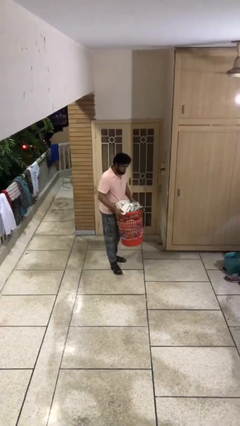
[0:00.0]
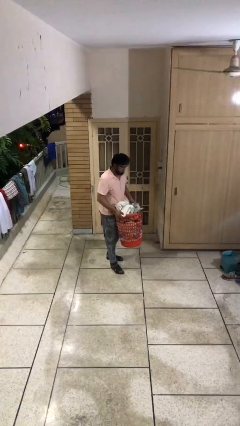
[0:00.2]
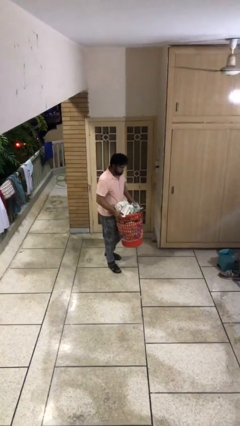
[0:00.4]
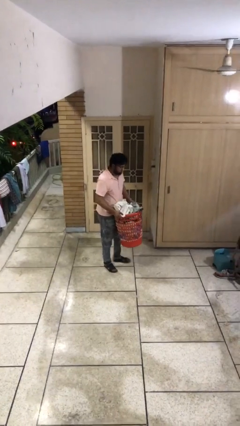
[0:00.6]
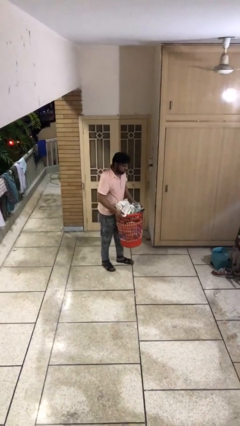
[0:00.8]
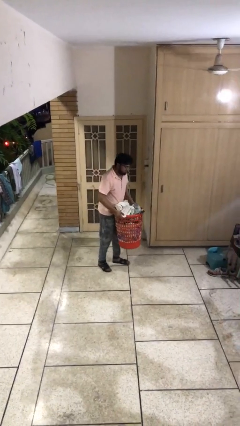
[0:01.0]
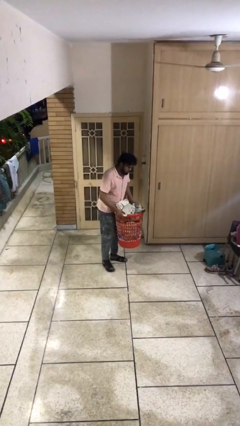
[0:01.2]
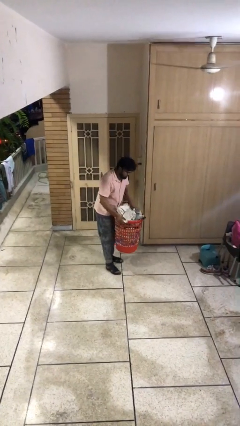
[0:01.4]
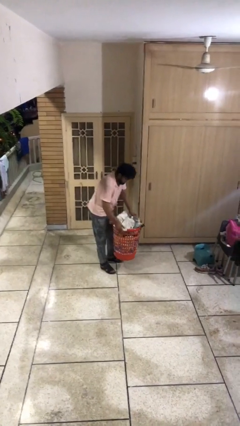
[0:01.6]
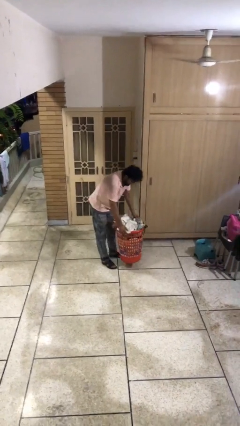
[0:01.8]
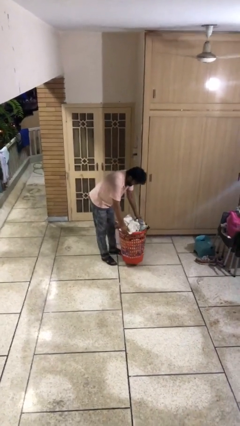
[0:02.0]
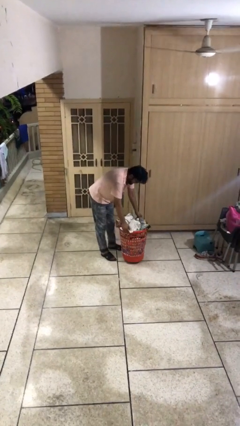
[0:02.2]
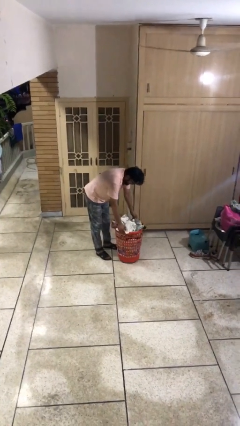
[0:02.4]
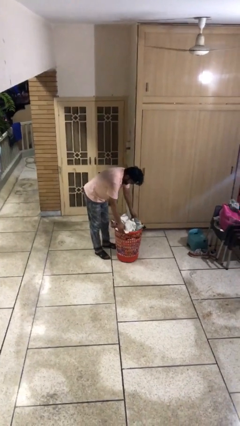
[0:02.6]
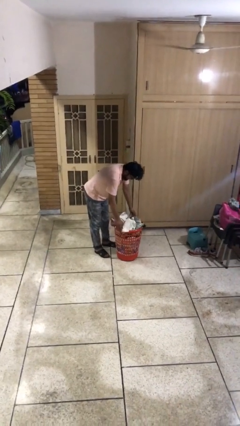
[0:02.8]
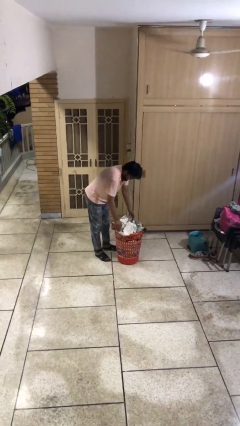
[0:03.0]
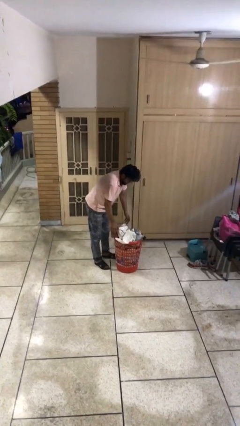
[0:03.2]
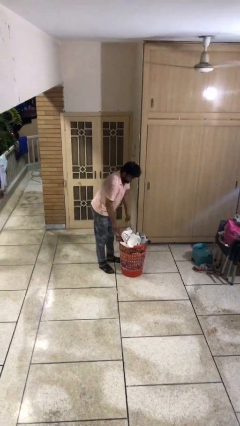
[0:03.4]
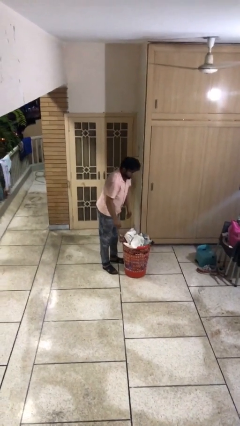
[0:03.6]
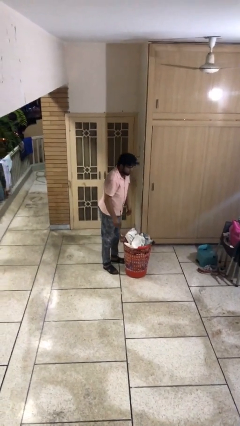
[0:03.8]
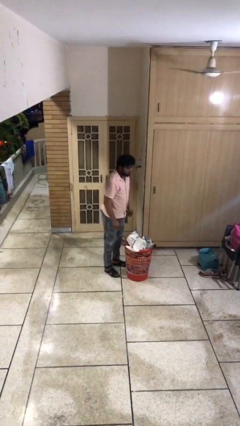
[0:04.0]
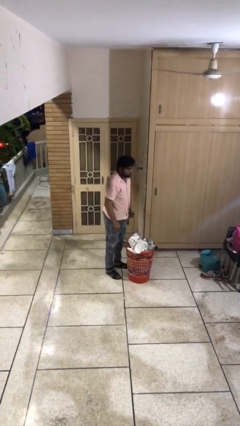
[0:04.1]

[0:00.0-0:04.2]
person puts down object on floor

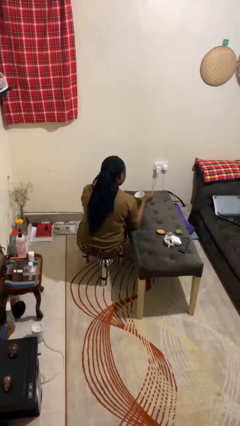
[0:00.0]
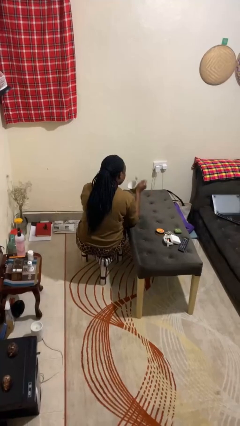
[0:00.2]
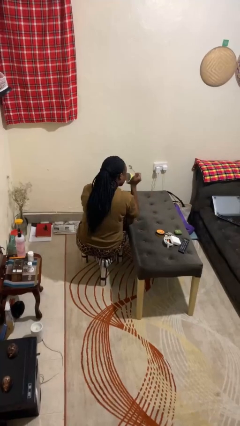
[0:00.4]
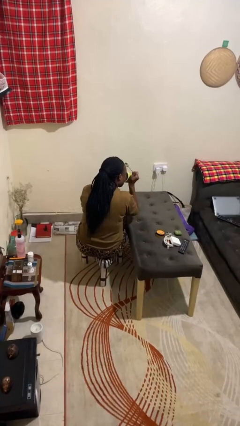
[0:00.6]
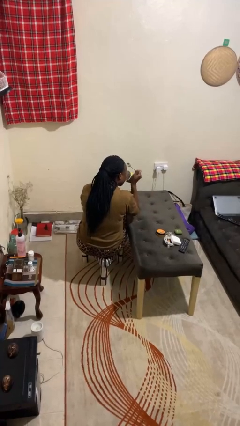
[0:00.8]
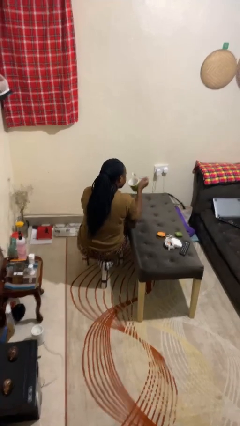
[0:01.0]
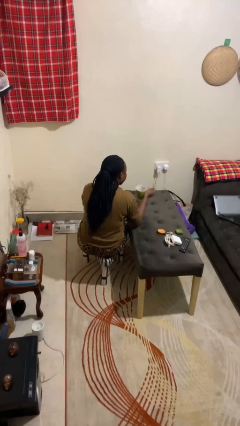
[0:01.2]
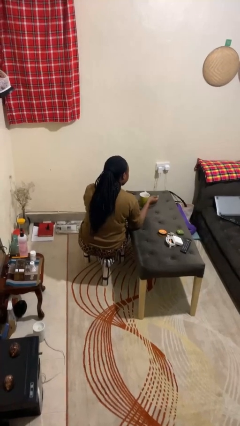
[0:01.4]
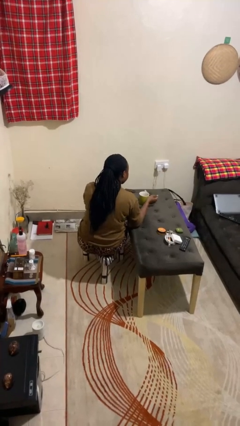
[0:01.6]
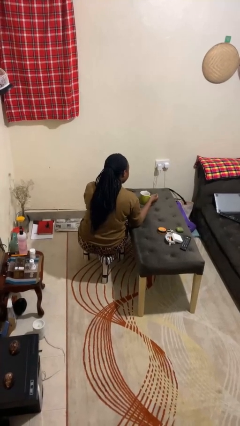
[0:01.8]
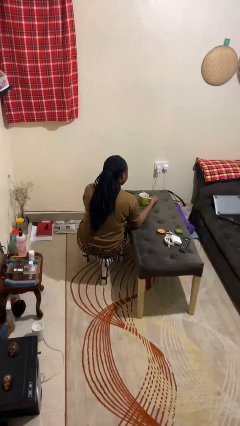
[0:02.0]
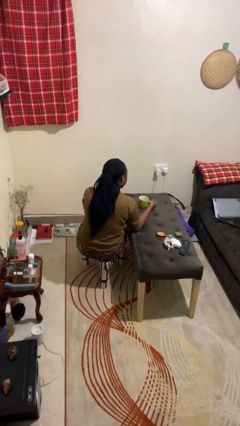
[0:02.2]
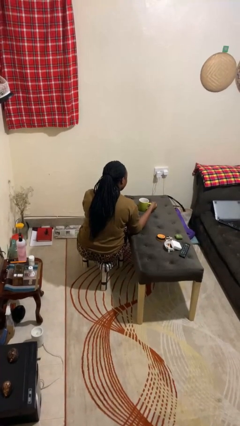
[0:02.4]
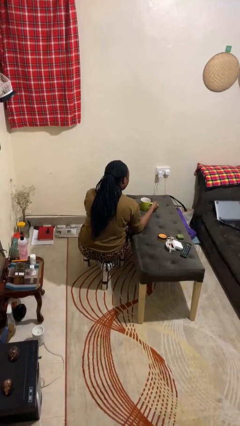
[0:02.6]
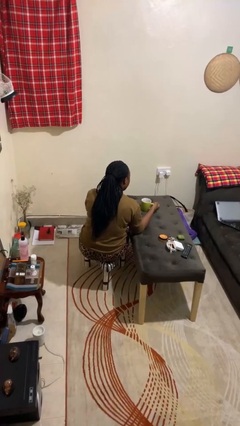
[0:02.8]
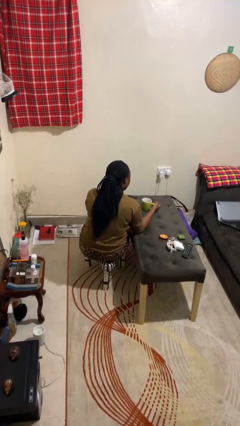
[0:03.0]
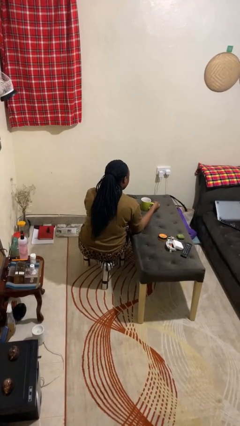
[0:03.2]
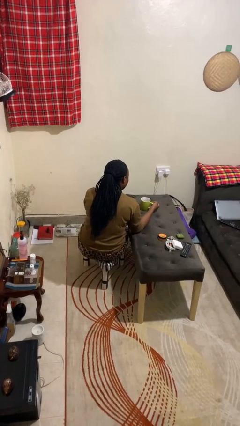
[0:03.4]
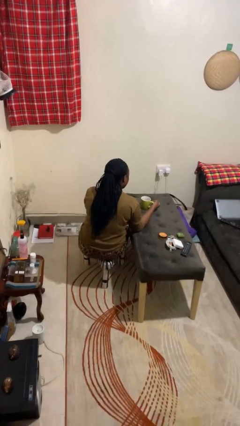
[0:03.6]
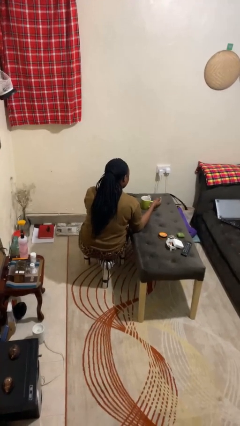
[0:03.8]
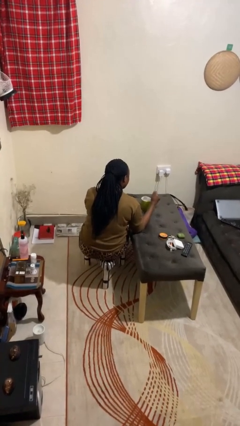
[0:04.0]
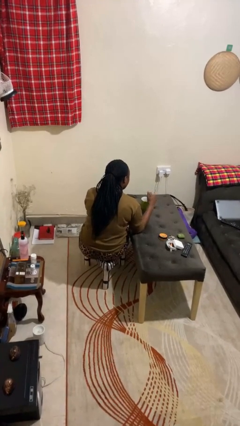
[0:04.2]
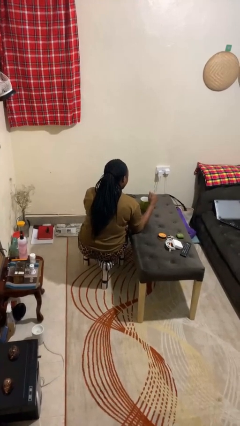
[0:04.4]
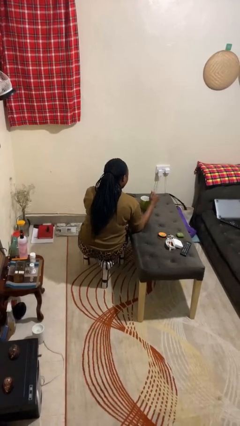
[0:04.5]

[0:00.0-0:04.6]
person drinks from mug

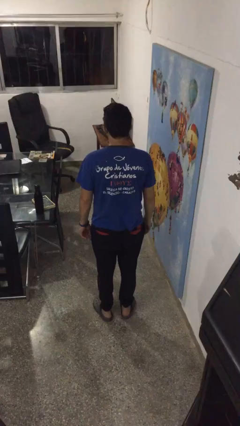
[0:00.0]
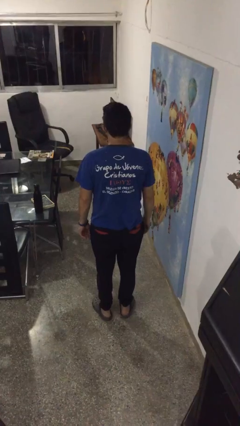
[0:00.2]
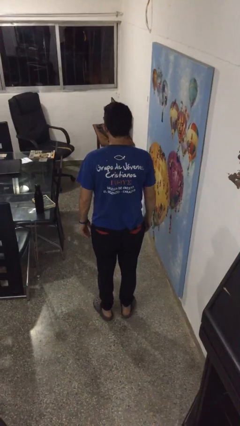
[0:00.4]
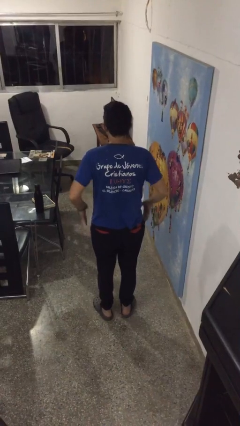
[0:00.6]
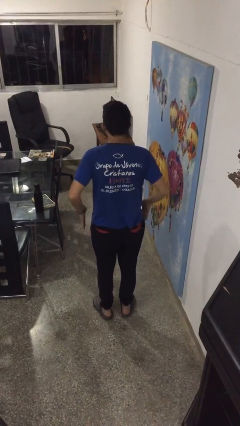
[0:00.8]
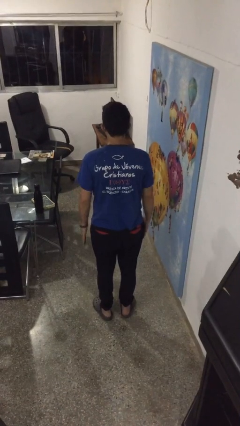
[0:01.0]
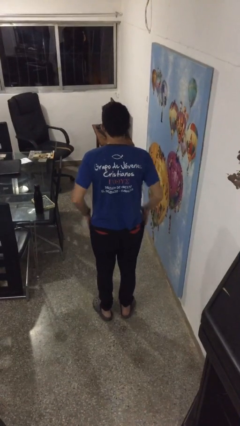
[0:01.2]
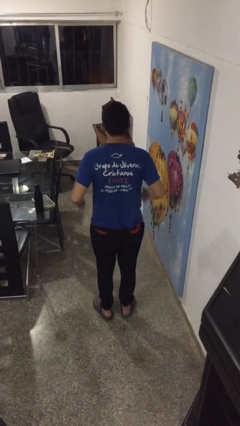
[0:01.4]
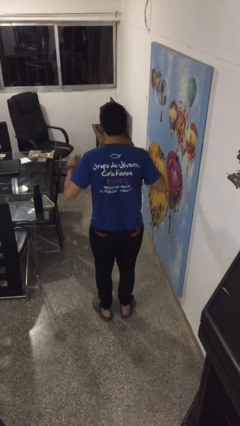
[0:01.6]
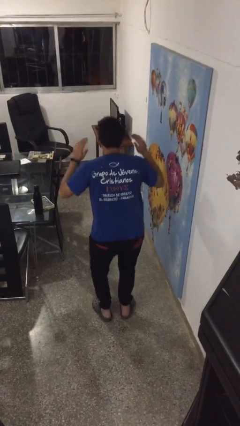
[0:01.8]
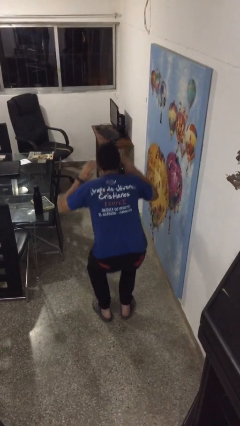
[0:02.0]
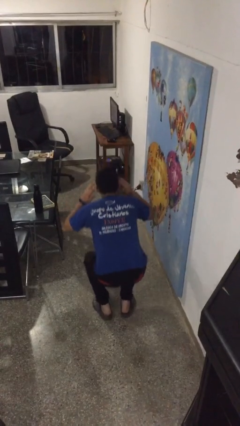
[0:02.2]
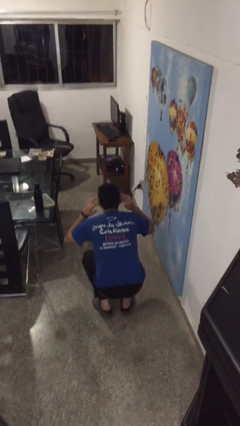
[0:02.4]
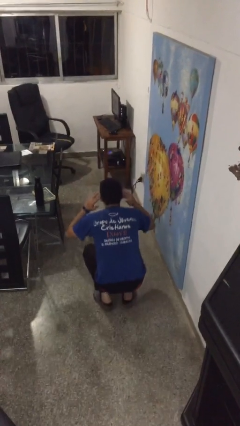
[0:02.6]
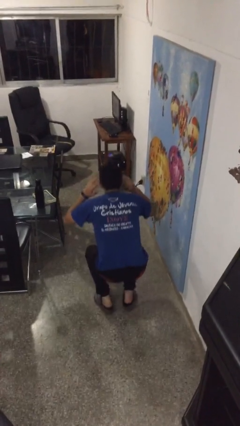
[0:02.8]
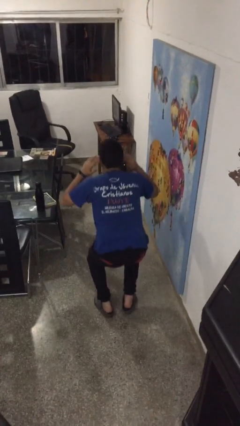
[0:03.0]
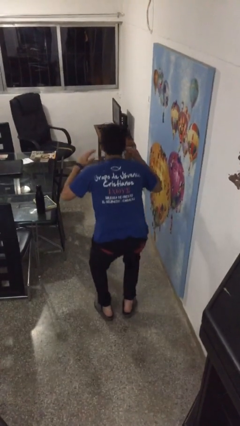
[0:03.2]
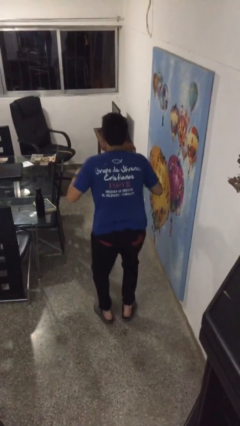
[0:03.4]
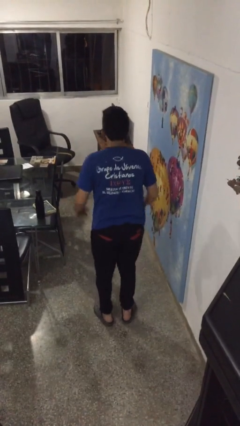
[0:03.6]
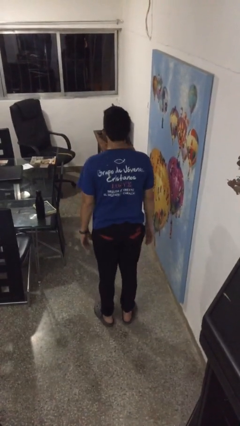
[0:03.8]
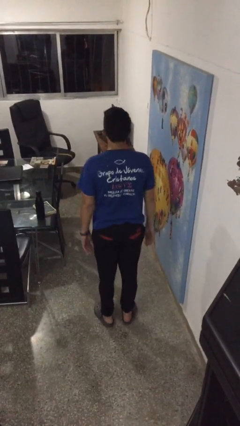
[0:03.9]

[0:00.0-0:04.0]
person exercises with situp

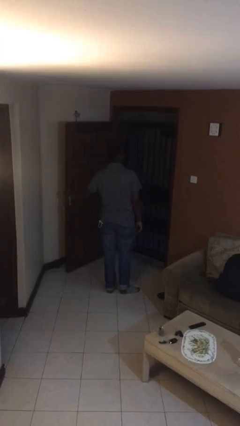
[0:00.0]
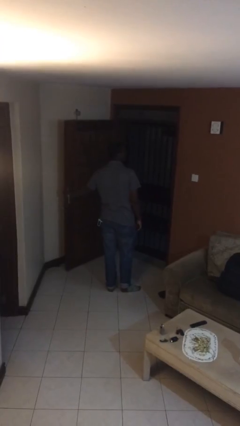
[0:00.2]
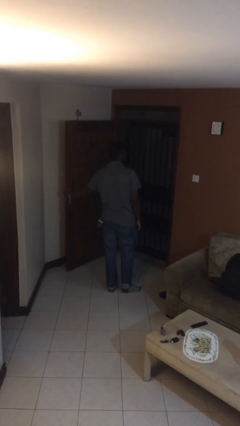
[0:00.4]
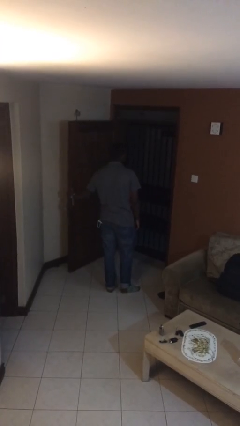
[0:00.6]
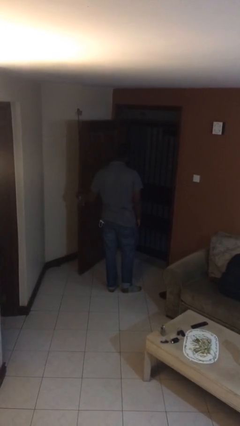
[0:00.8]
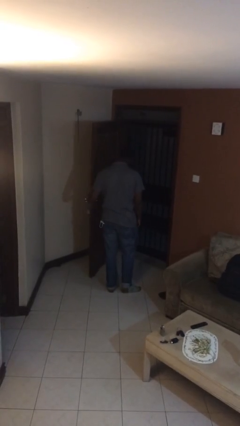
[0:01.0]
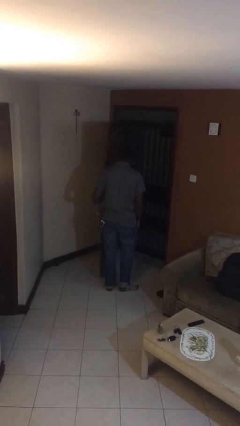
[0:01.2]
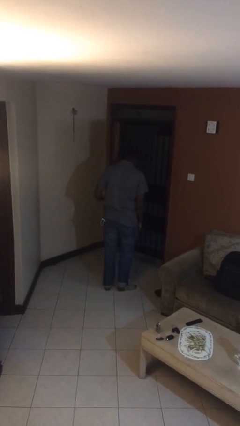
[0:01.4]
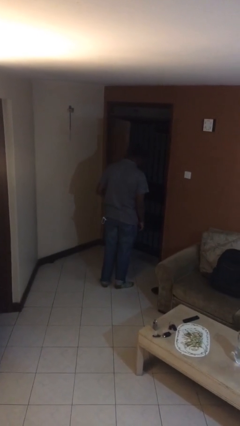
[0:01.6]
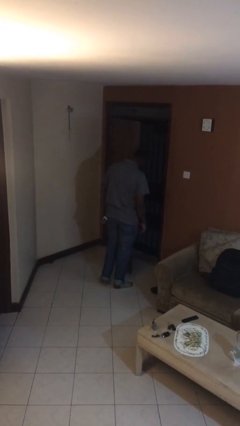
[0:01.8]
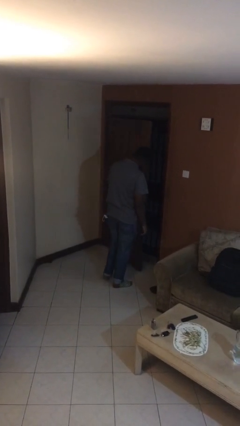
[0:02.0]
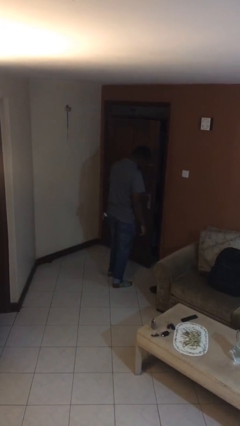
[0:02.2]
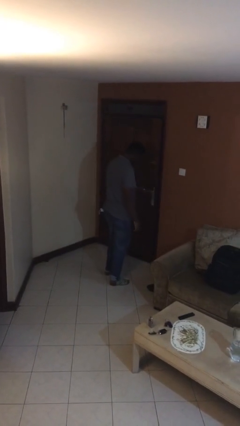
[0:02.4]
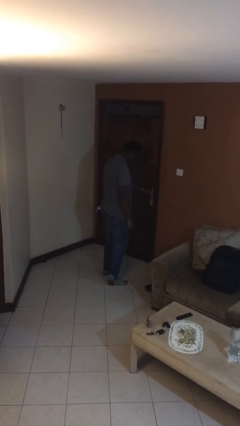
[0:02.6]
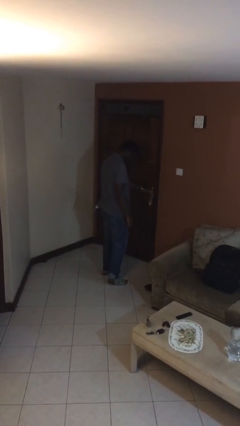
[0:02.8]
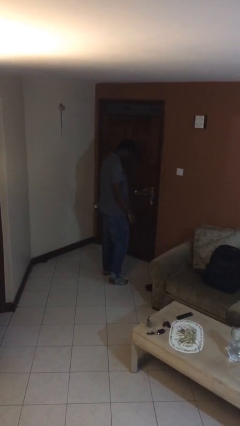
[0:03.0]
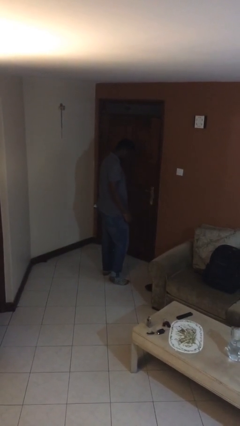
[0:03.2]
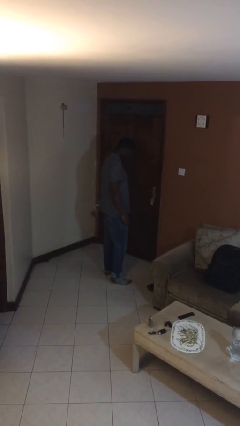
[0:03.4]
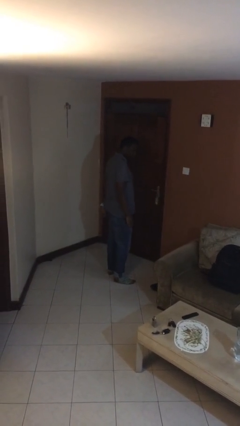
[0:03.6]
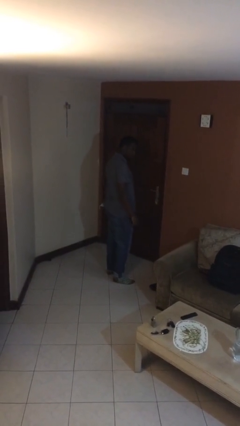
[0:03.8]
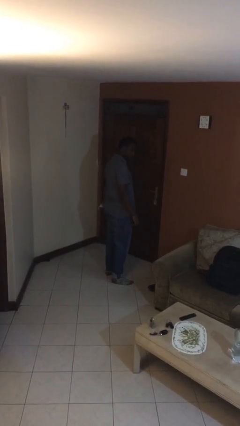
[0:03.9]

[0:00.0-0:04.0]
person closes facility door

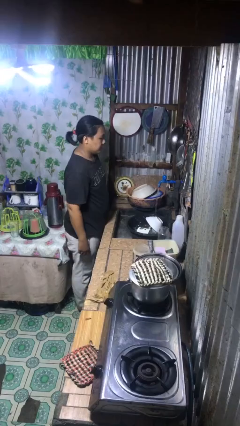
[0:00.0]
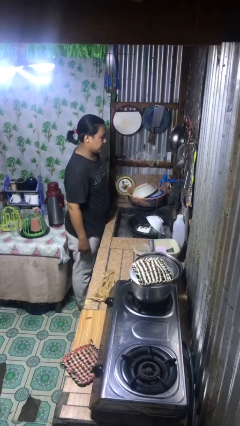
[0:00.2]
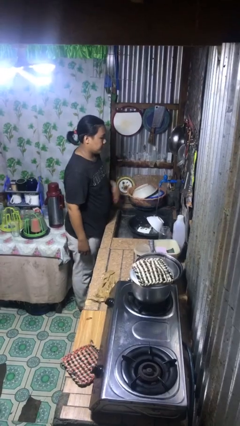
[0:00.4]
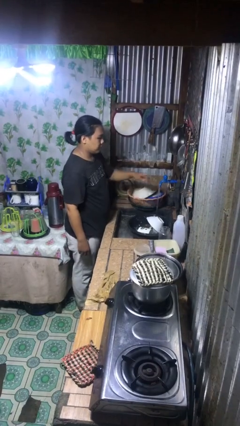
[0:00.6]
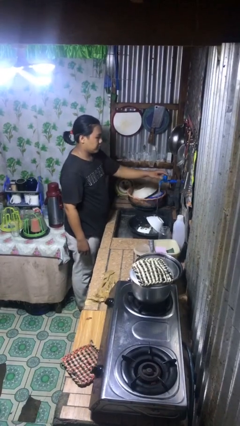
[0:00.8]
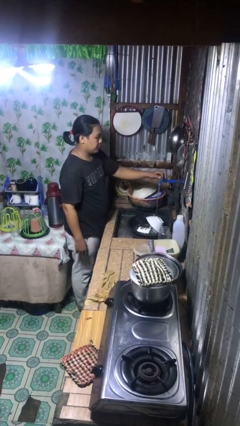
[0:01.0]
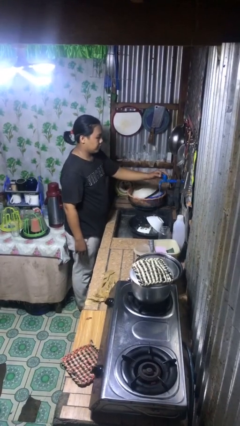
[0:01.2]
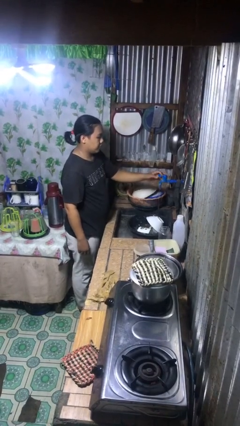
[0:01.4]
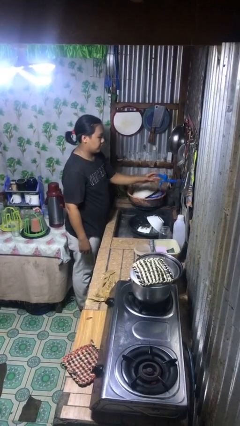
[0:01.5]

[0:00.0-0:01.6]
person turns off faucet
